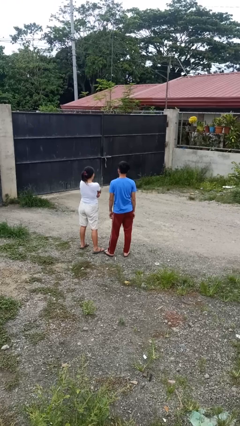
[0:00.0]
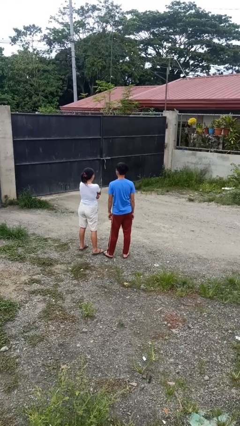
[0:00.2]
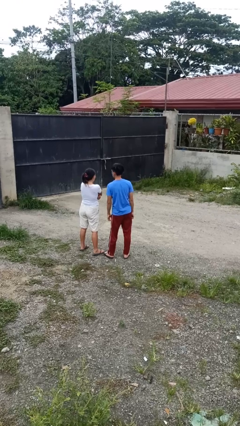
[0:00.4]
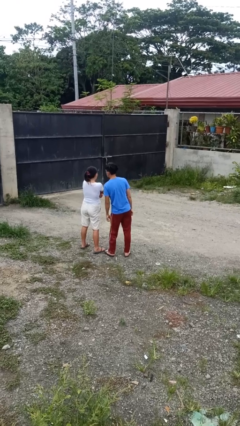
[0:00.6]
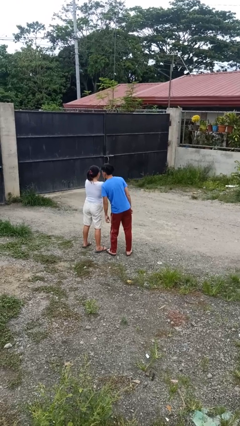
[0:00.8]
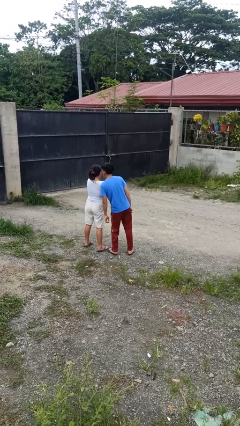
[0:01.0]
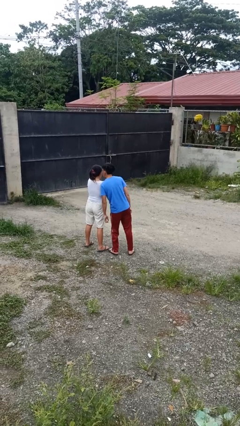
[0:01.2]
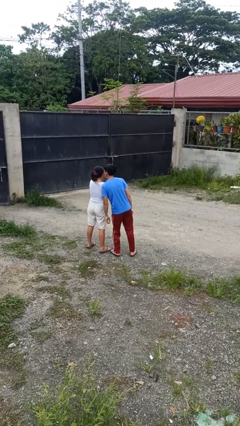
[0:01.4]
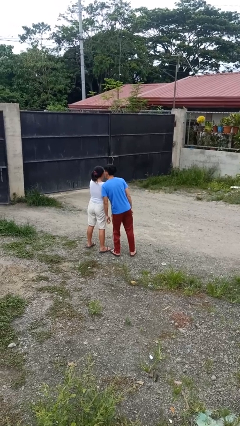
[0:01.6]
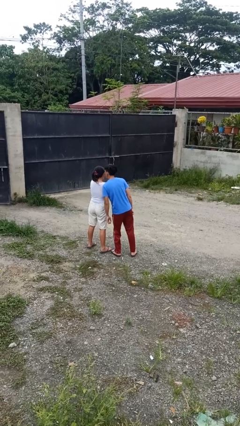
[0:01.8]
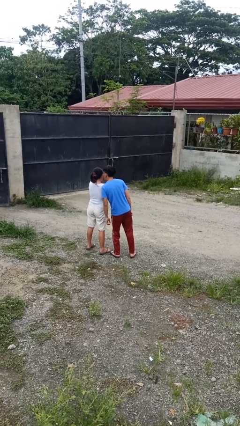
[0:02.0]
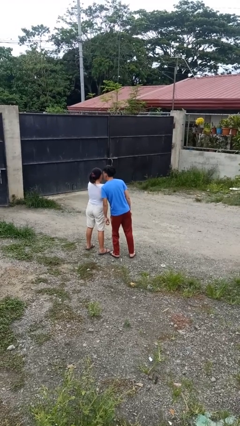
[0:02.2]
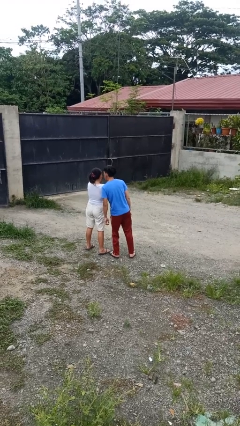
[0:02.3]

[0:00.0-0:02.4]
person kisses cheek of person

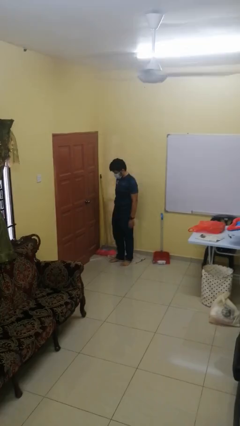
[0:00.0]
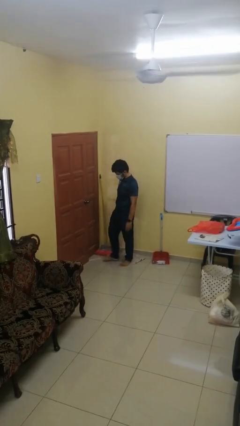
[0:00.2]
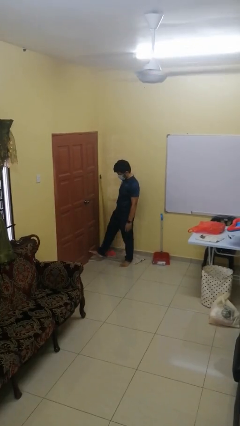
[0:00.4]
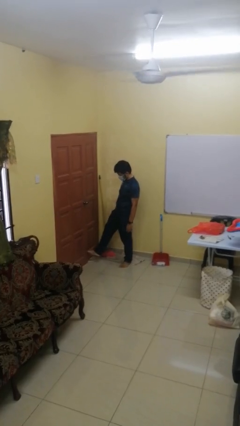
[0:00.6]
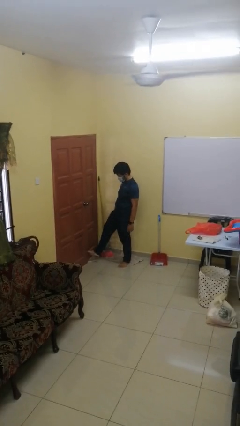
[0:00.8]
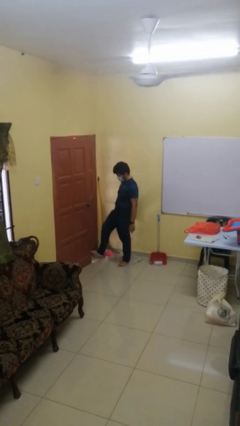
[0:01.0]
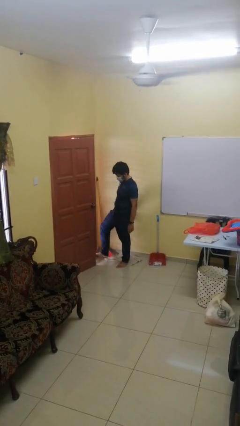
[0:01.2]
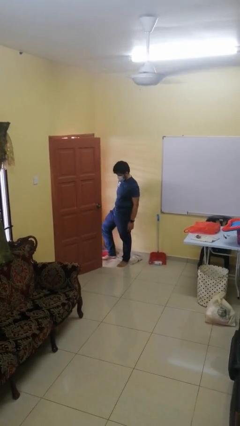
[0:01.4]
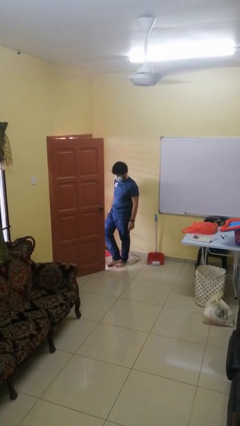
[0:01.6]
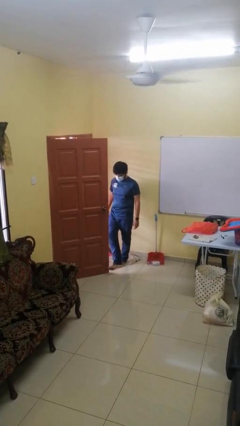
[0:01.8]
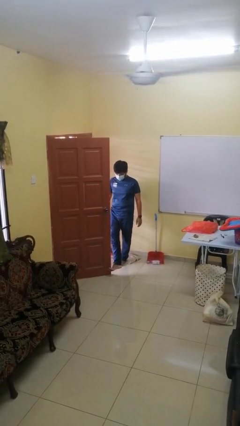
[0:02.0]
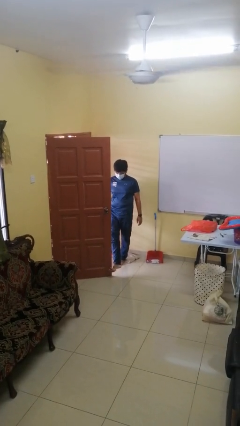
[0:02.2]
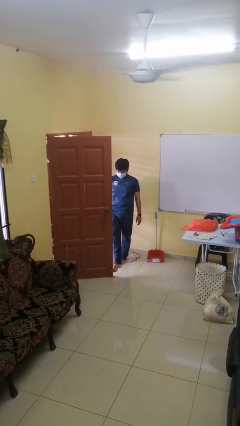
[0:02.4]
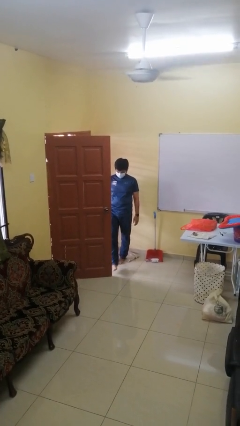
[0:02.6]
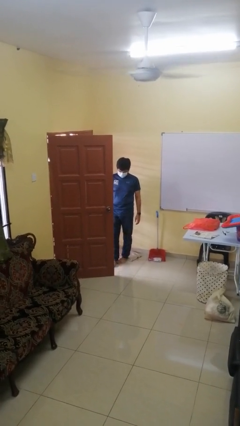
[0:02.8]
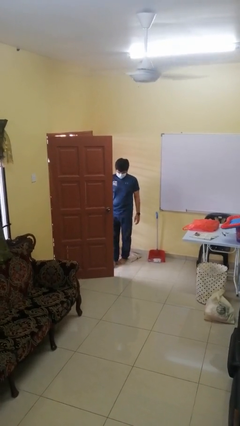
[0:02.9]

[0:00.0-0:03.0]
person opens facility door

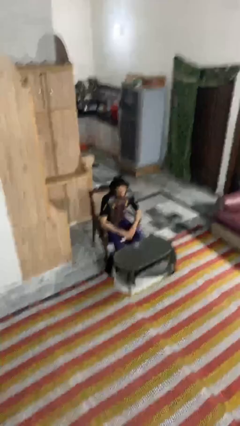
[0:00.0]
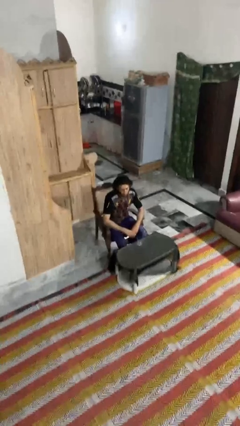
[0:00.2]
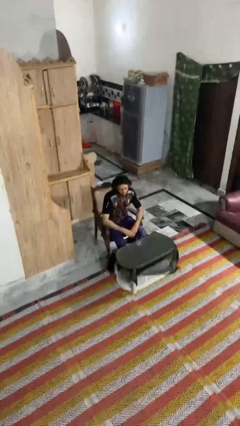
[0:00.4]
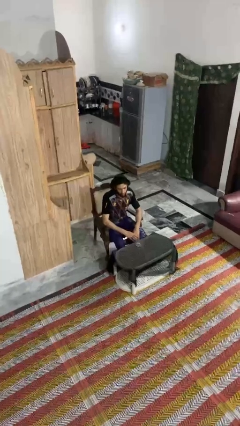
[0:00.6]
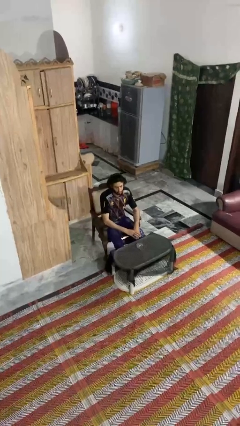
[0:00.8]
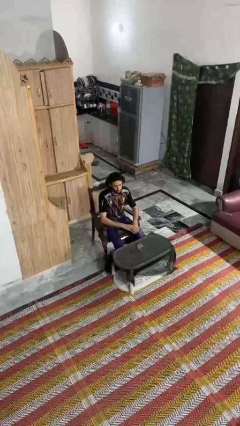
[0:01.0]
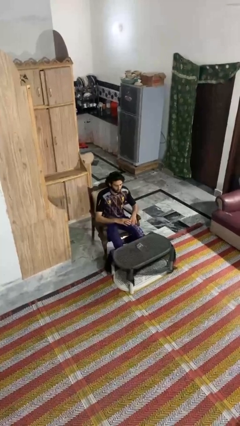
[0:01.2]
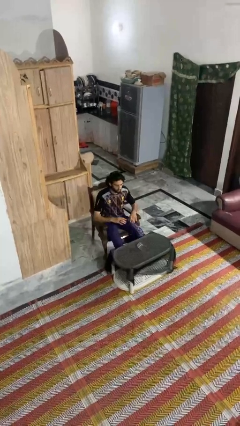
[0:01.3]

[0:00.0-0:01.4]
person knocks over glass

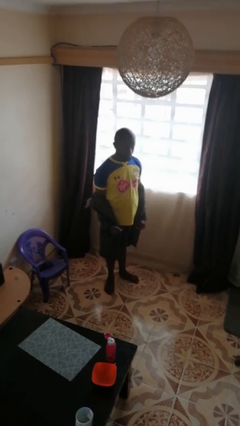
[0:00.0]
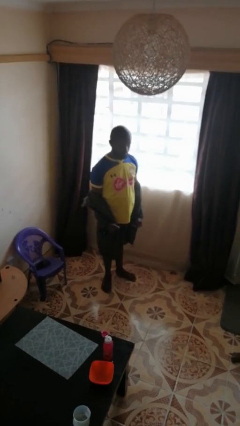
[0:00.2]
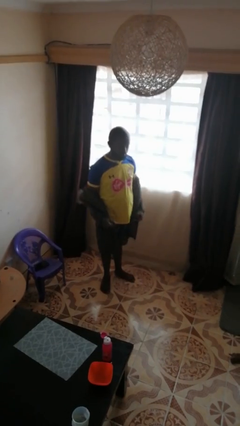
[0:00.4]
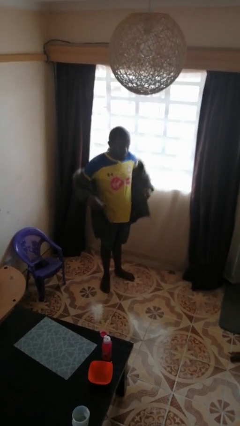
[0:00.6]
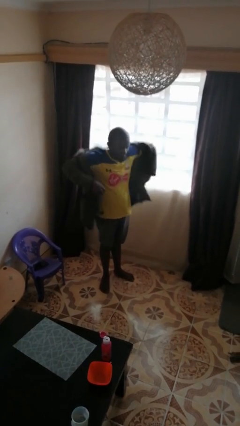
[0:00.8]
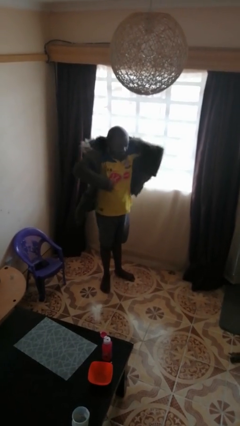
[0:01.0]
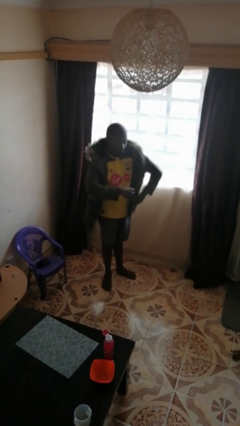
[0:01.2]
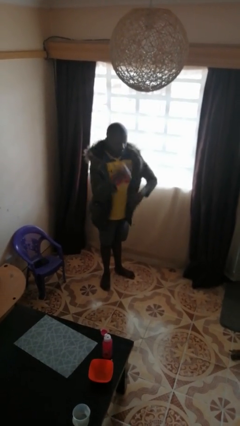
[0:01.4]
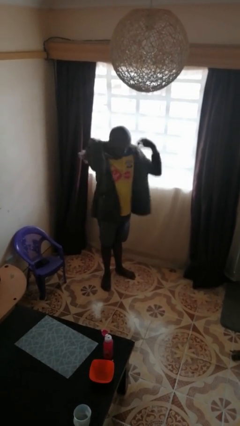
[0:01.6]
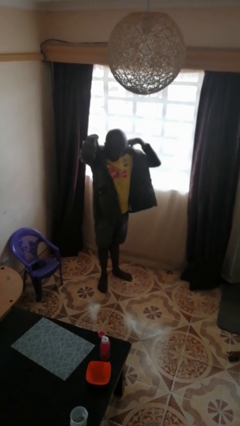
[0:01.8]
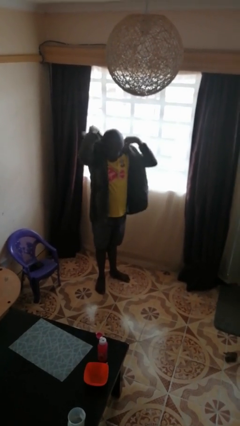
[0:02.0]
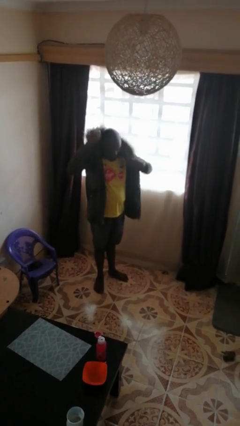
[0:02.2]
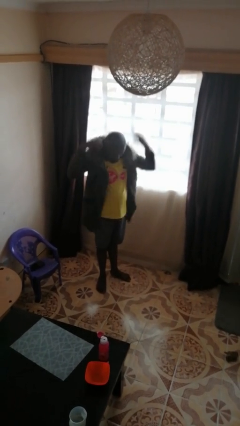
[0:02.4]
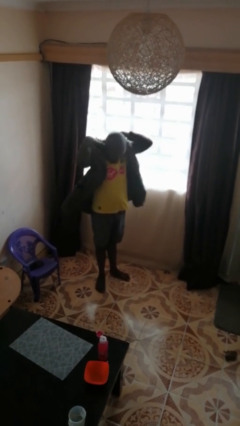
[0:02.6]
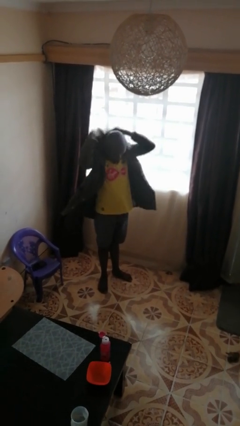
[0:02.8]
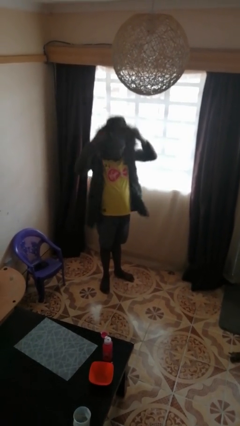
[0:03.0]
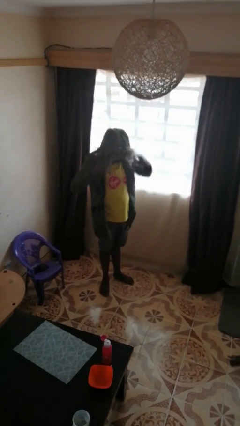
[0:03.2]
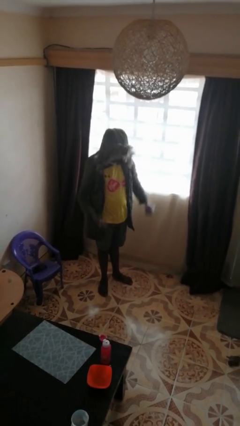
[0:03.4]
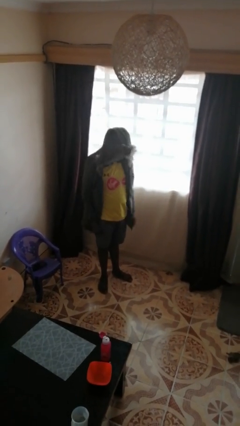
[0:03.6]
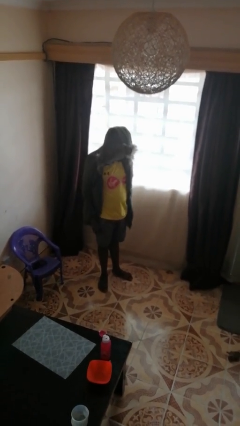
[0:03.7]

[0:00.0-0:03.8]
person puts on hoodie

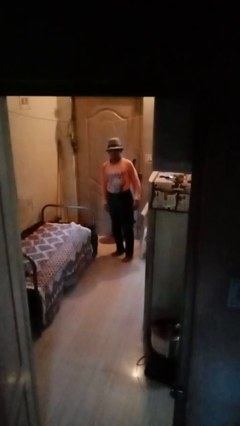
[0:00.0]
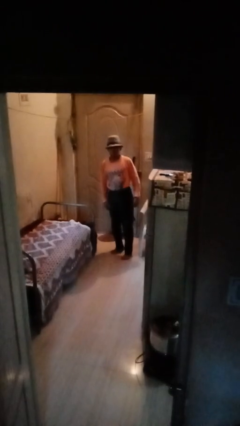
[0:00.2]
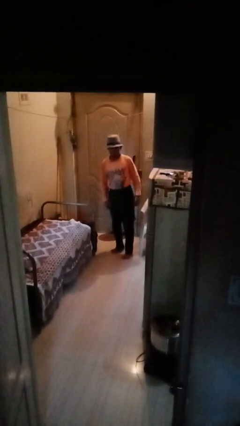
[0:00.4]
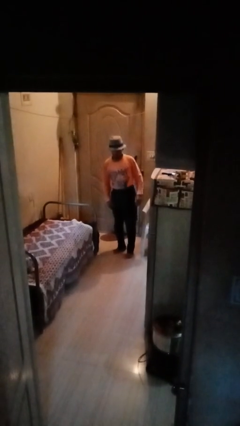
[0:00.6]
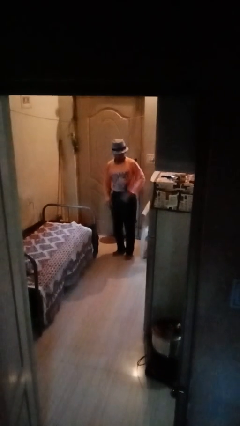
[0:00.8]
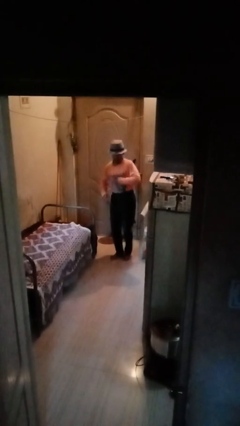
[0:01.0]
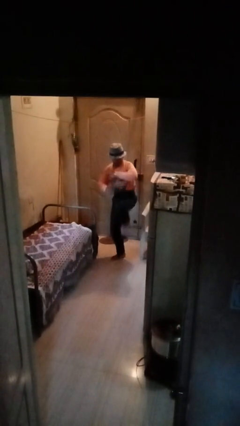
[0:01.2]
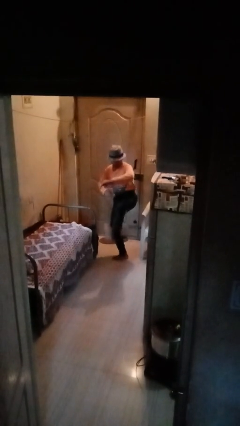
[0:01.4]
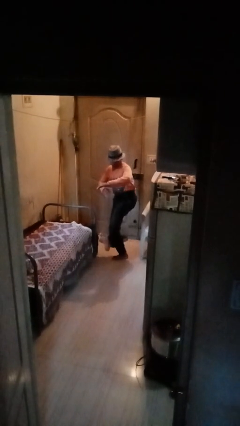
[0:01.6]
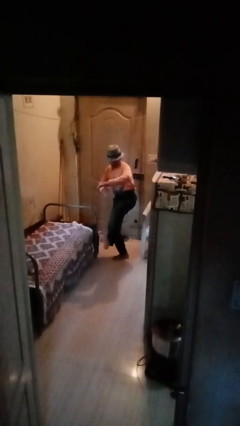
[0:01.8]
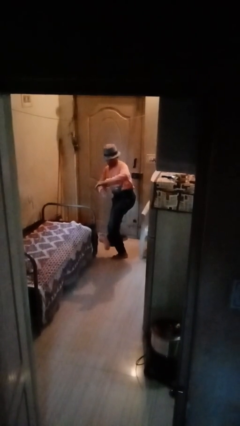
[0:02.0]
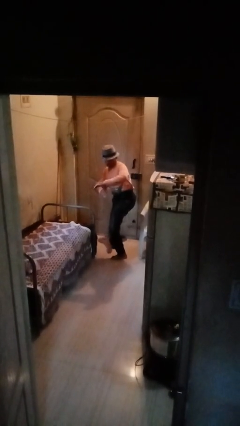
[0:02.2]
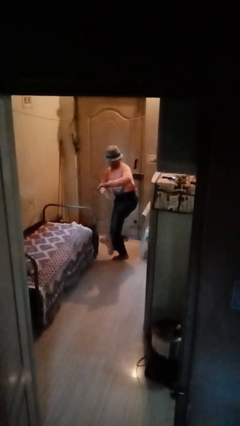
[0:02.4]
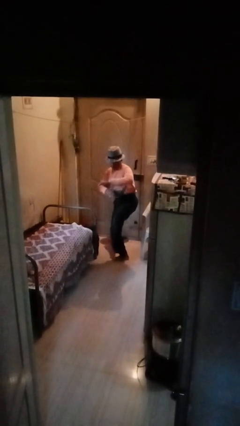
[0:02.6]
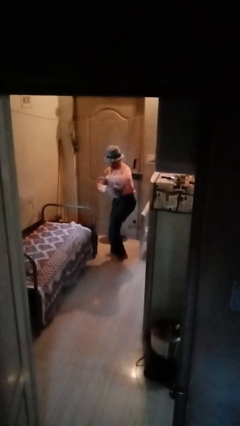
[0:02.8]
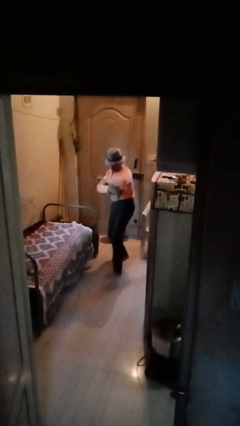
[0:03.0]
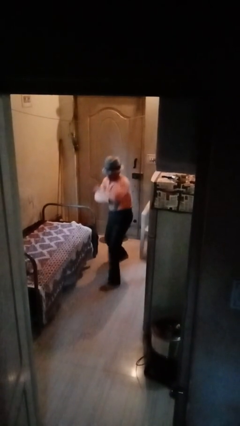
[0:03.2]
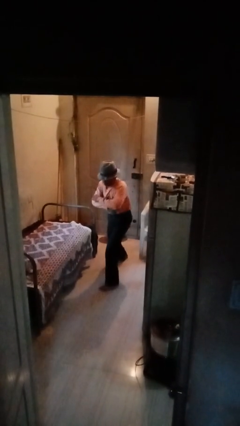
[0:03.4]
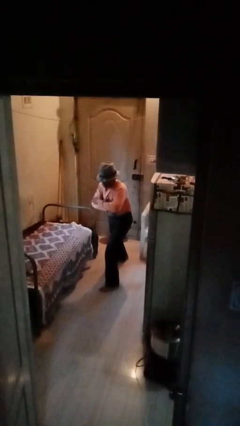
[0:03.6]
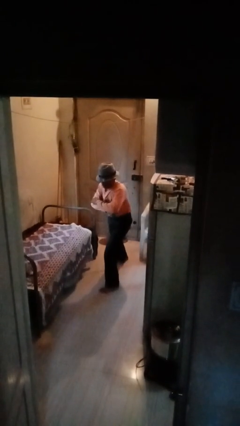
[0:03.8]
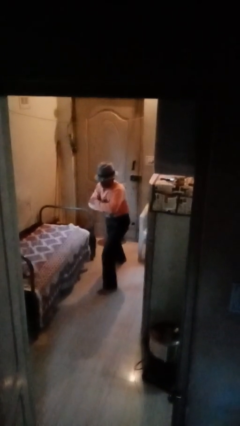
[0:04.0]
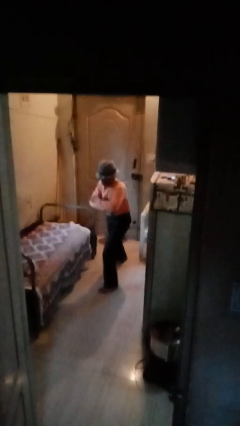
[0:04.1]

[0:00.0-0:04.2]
person karate kicks

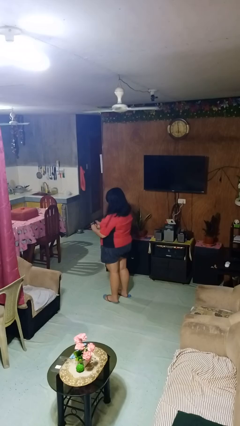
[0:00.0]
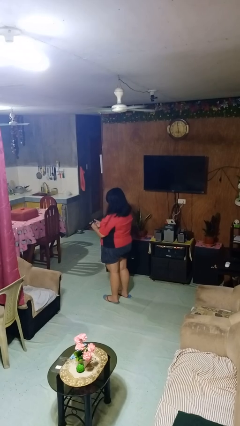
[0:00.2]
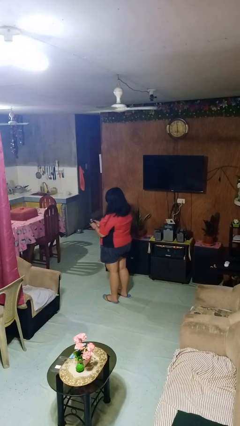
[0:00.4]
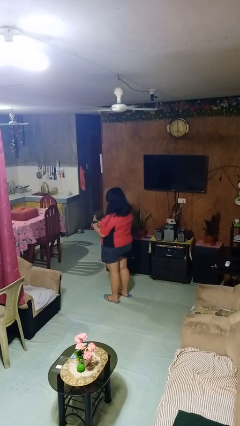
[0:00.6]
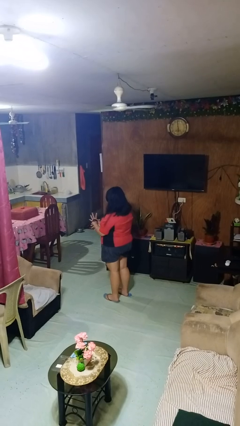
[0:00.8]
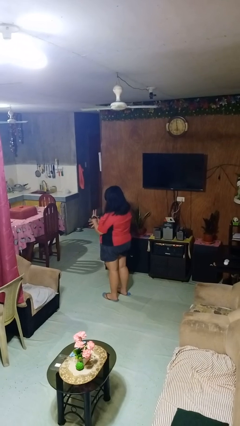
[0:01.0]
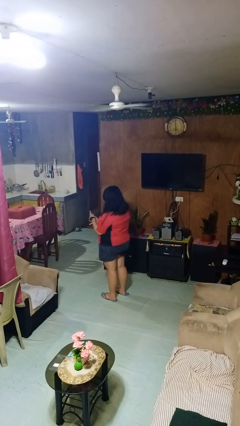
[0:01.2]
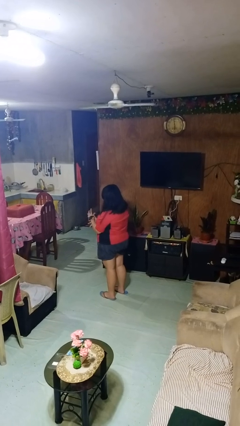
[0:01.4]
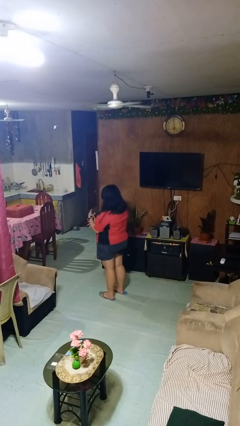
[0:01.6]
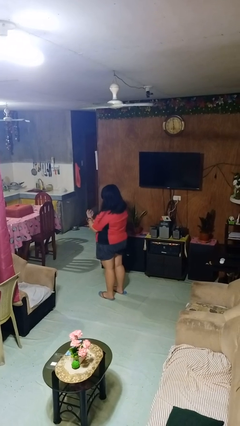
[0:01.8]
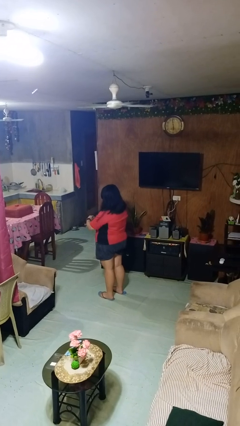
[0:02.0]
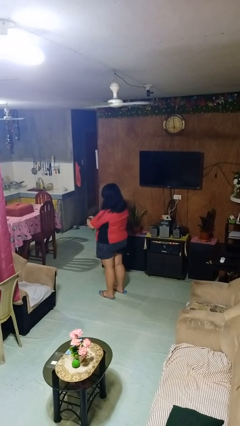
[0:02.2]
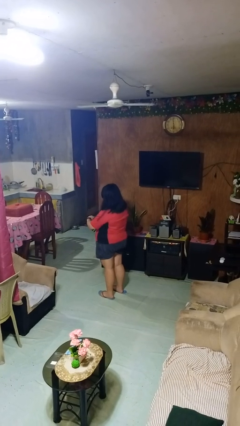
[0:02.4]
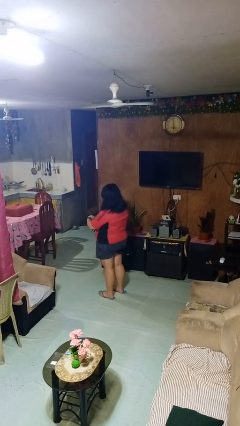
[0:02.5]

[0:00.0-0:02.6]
person puts on wristwatch
